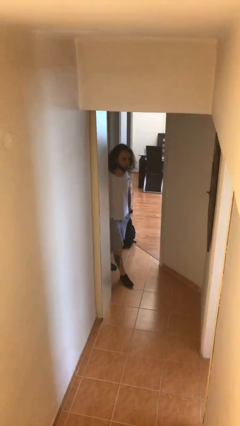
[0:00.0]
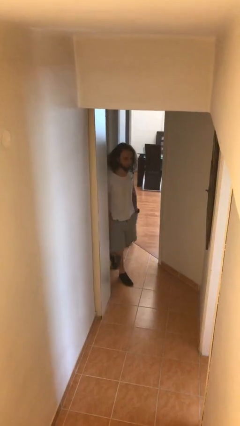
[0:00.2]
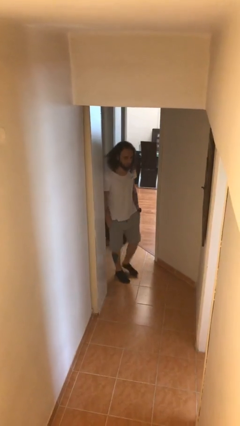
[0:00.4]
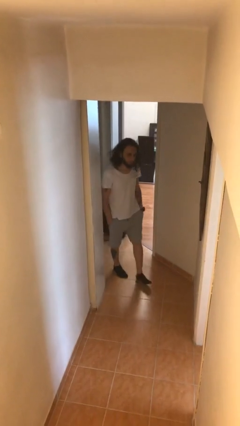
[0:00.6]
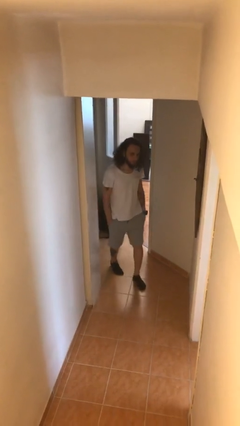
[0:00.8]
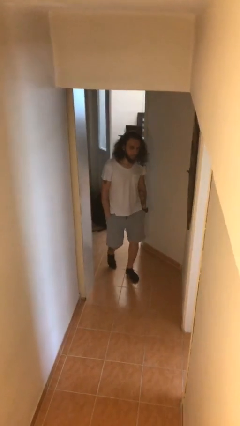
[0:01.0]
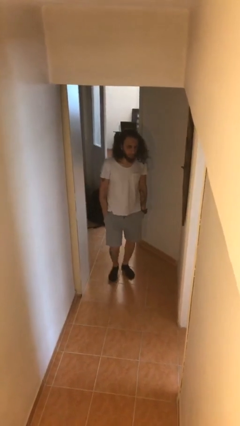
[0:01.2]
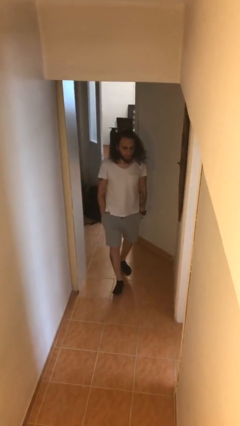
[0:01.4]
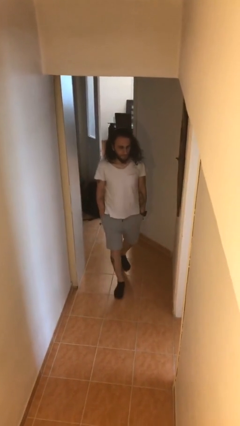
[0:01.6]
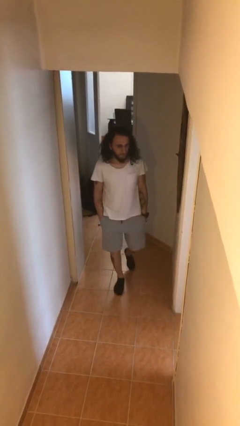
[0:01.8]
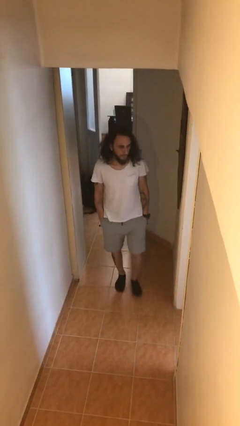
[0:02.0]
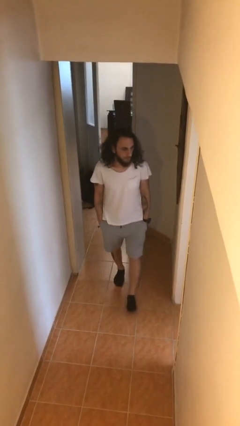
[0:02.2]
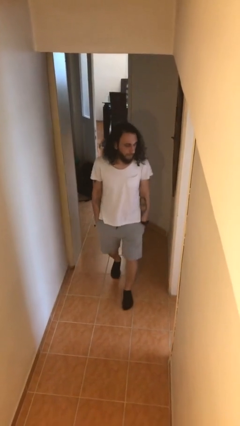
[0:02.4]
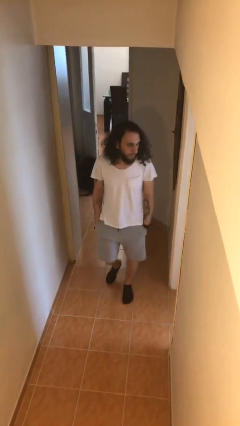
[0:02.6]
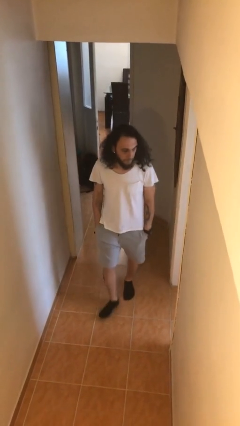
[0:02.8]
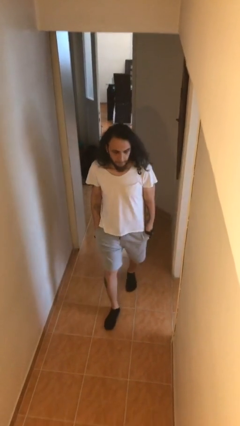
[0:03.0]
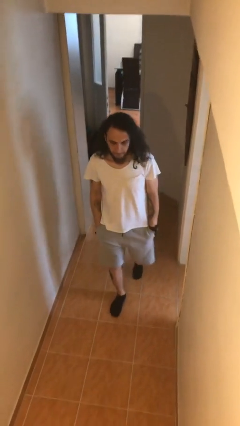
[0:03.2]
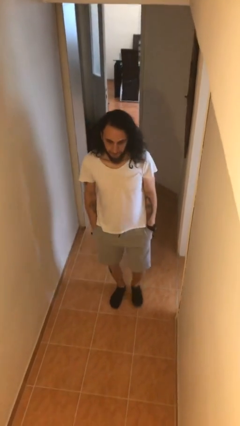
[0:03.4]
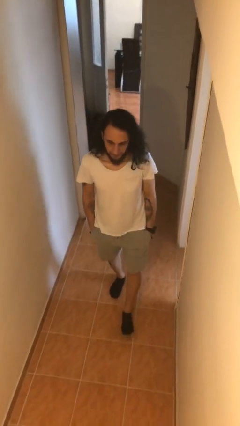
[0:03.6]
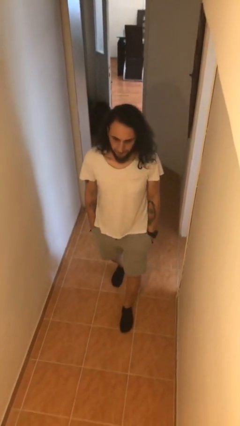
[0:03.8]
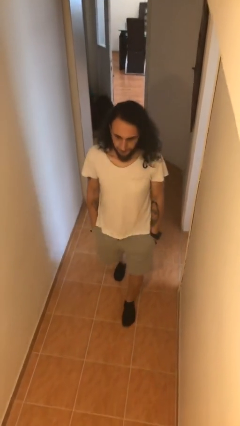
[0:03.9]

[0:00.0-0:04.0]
person enters scene through structure

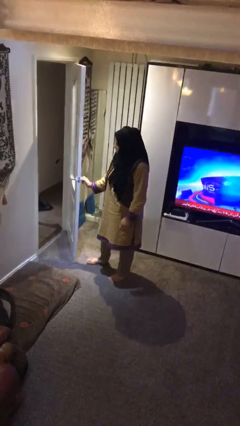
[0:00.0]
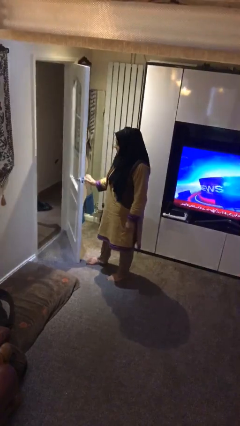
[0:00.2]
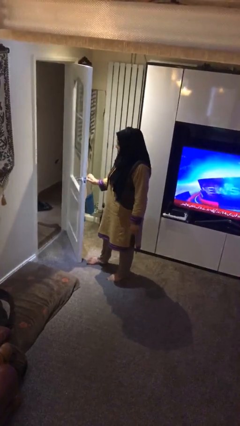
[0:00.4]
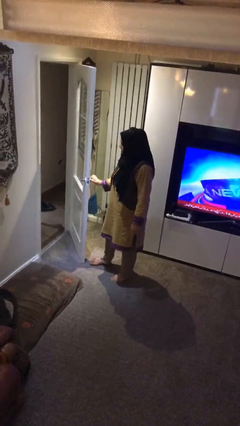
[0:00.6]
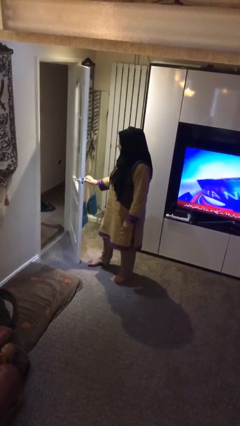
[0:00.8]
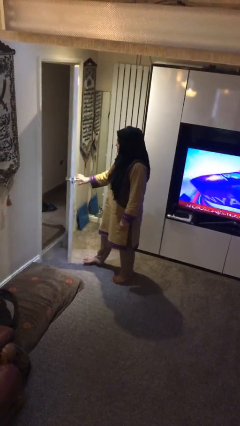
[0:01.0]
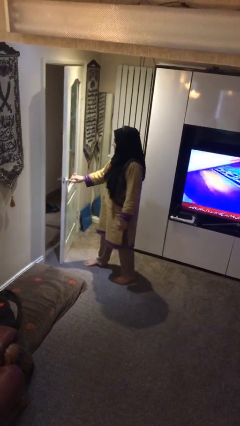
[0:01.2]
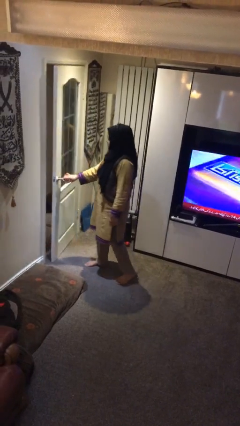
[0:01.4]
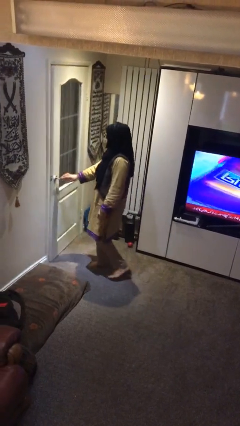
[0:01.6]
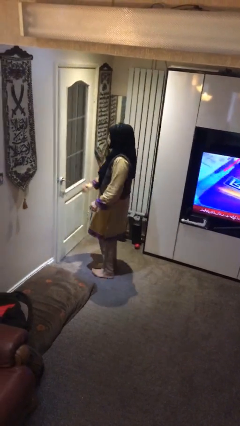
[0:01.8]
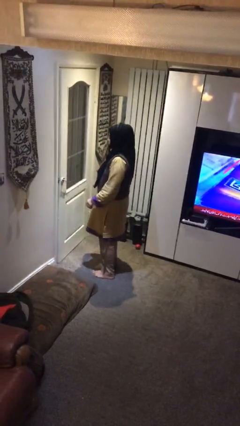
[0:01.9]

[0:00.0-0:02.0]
person closes facility door

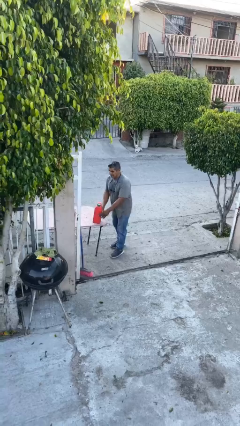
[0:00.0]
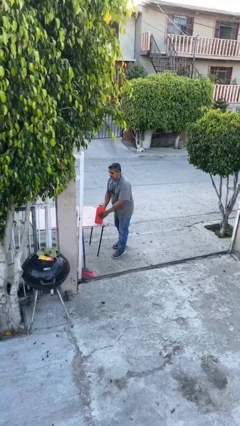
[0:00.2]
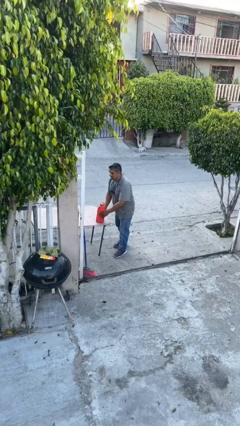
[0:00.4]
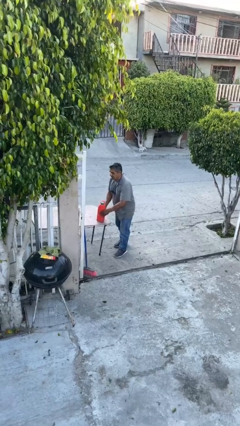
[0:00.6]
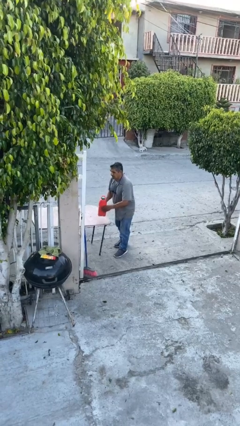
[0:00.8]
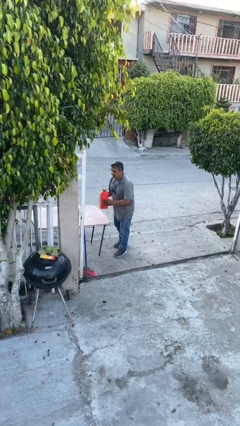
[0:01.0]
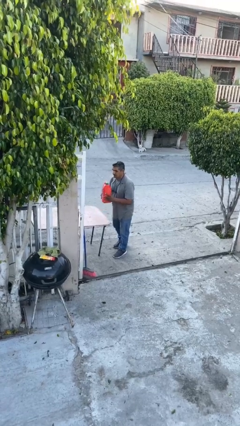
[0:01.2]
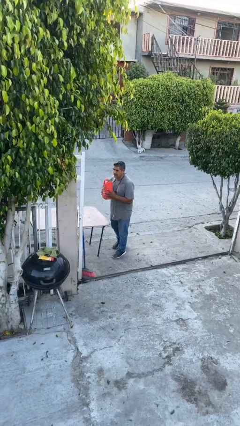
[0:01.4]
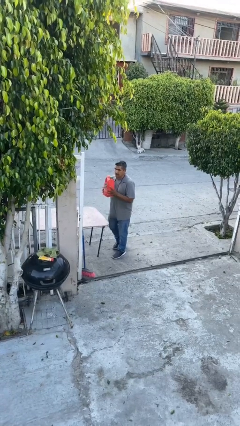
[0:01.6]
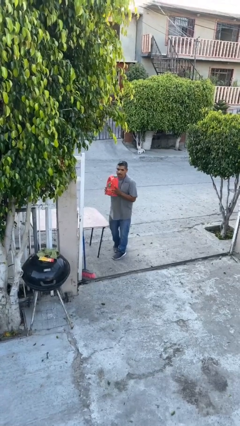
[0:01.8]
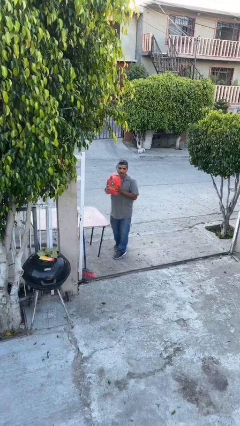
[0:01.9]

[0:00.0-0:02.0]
person picks up object from table

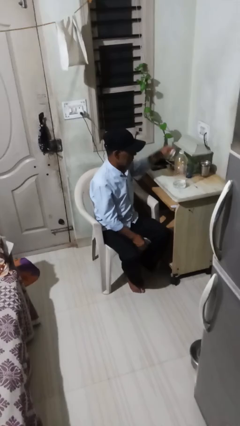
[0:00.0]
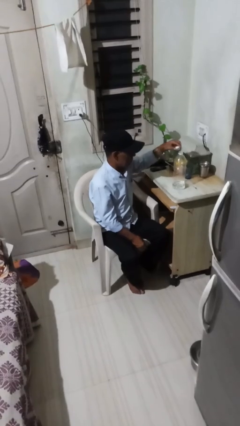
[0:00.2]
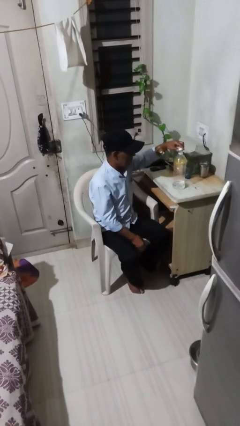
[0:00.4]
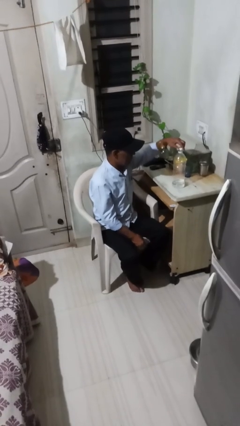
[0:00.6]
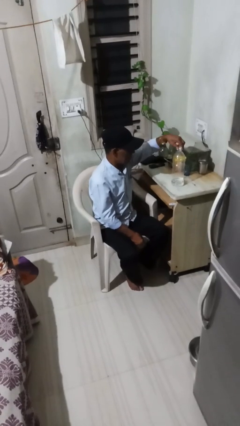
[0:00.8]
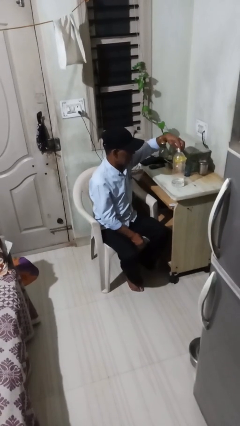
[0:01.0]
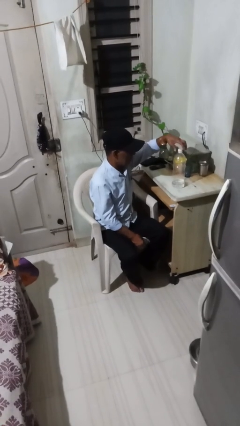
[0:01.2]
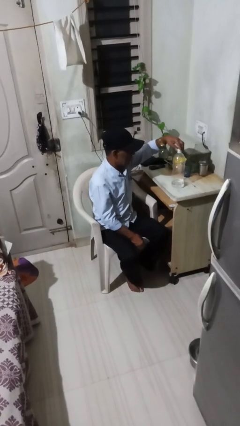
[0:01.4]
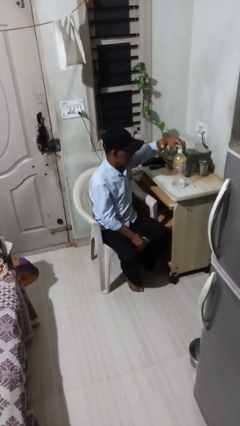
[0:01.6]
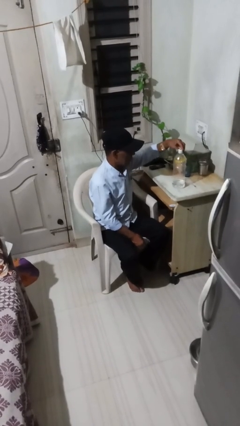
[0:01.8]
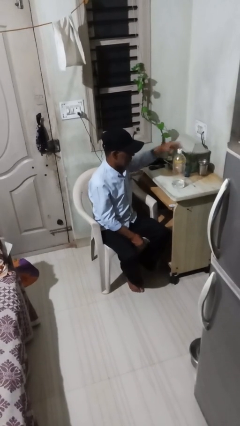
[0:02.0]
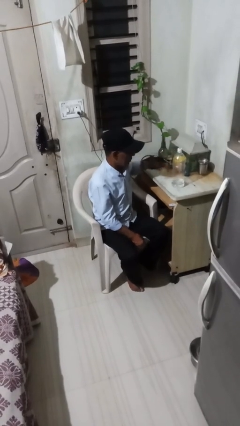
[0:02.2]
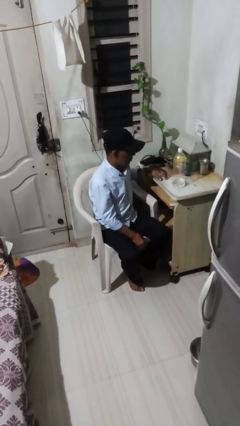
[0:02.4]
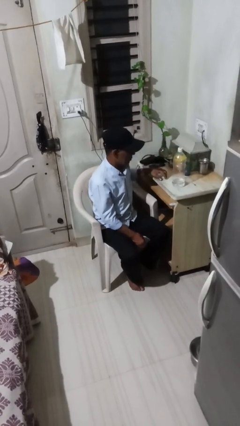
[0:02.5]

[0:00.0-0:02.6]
person screws lid to bottle

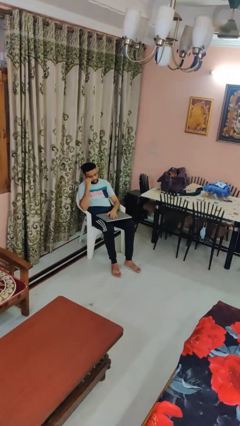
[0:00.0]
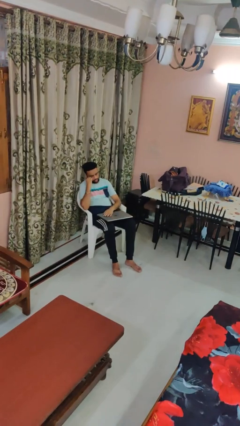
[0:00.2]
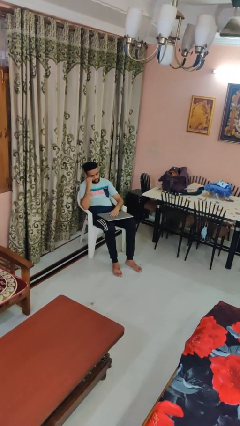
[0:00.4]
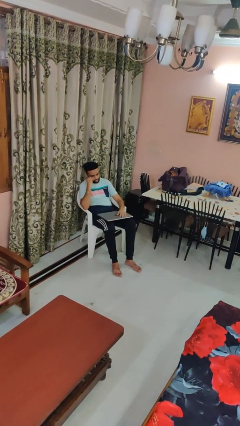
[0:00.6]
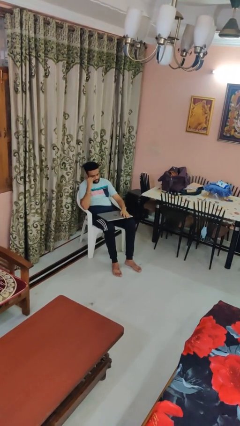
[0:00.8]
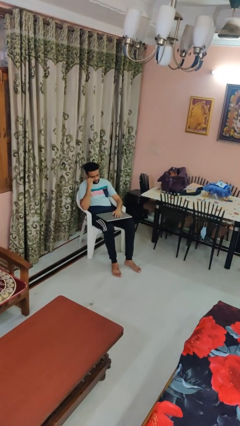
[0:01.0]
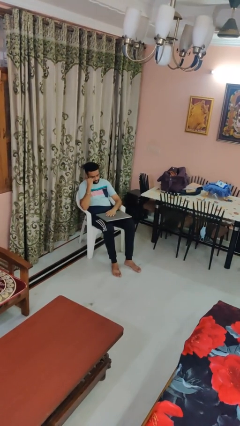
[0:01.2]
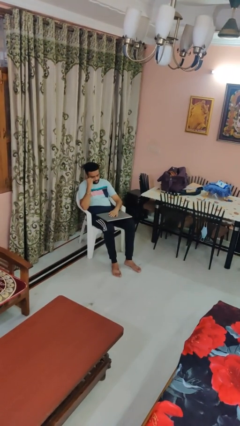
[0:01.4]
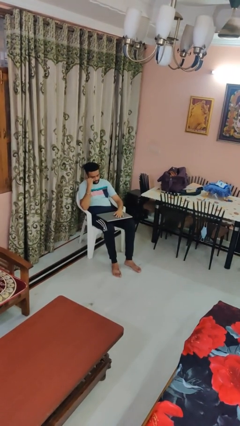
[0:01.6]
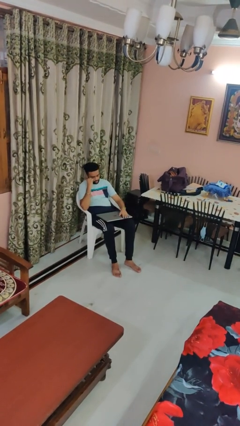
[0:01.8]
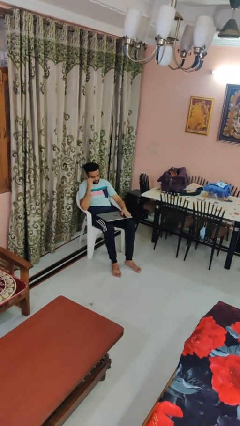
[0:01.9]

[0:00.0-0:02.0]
person waves hand over object

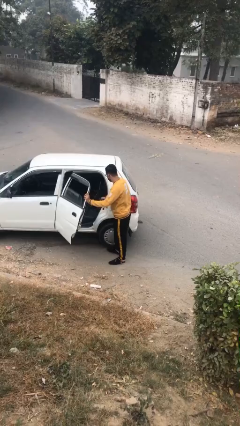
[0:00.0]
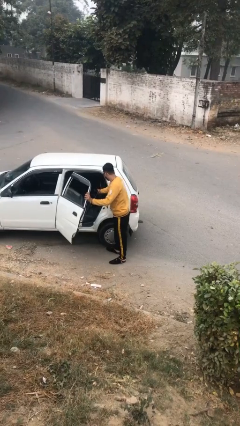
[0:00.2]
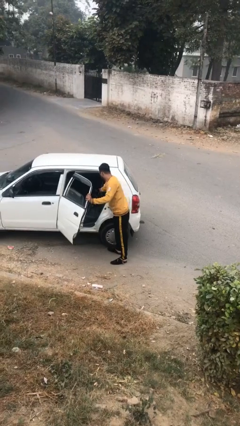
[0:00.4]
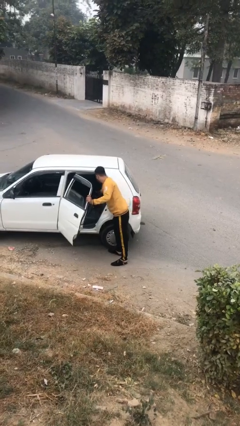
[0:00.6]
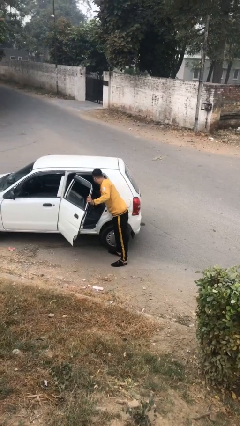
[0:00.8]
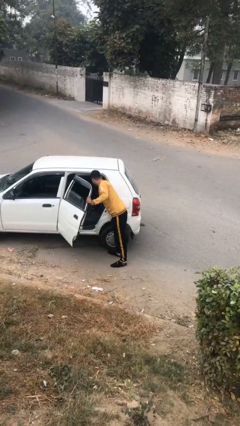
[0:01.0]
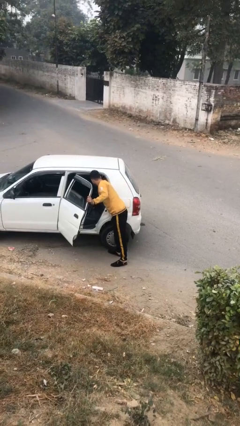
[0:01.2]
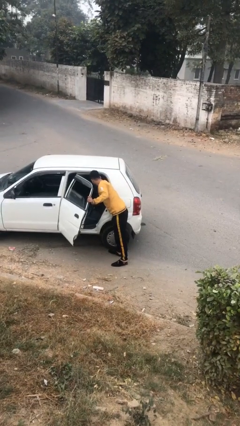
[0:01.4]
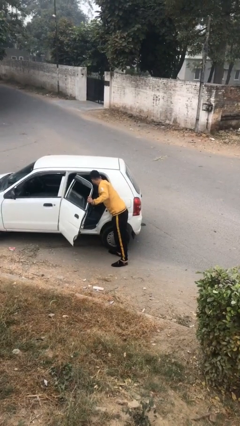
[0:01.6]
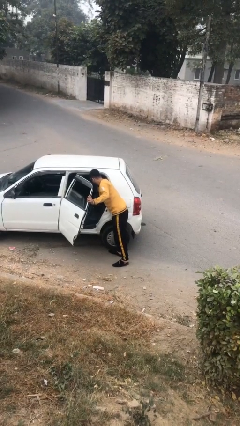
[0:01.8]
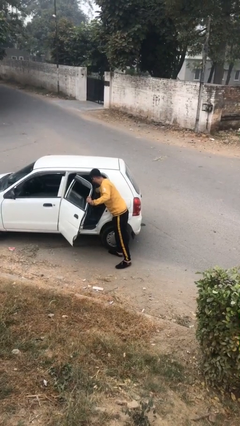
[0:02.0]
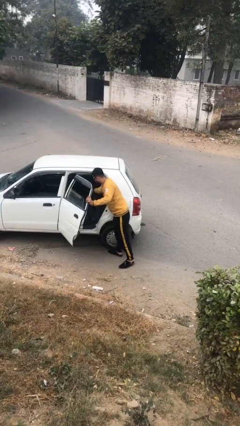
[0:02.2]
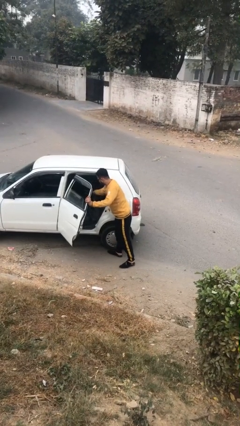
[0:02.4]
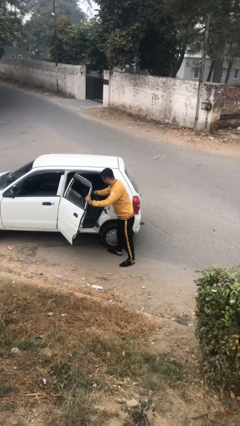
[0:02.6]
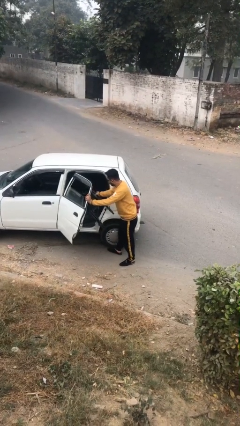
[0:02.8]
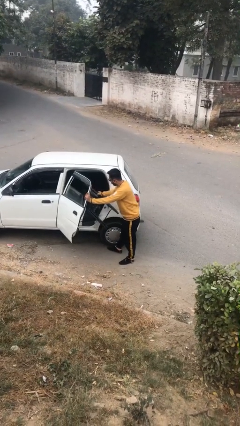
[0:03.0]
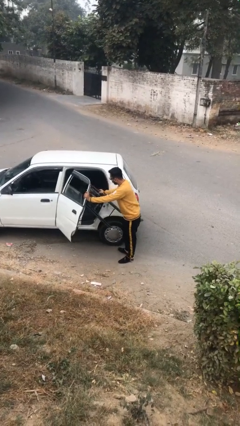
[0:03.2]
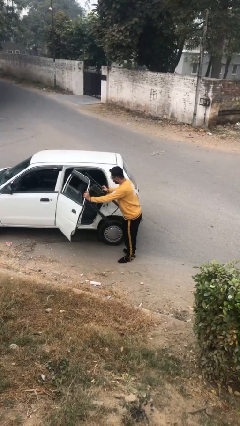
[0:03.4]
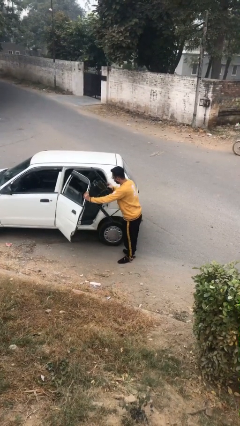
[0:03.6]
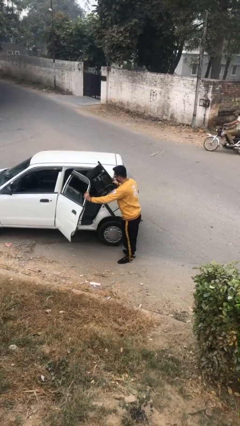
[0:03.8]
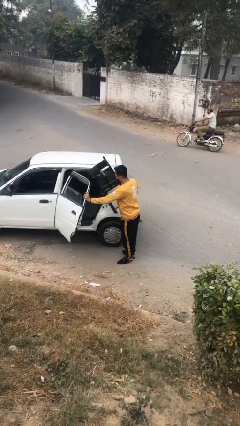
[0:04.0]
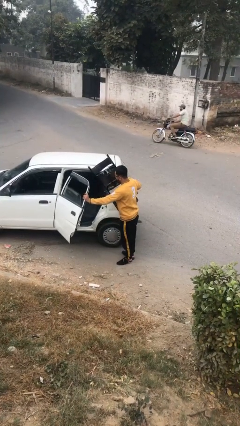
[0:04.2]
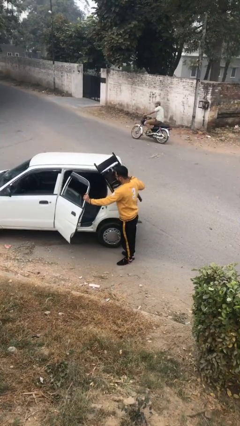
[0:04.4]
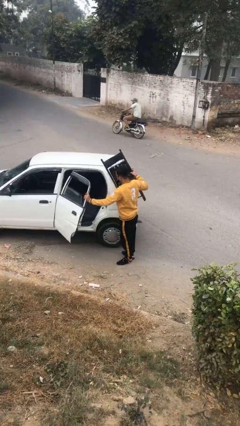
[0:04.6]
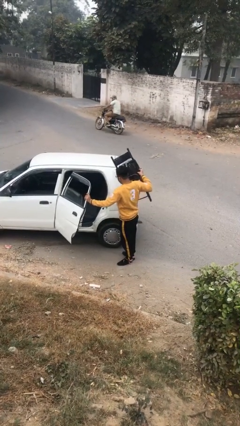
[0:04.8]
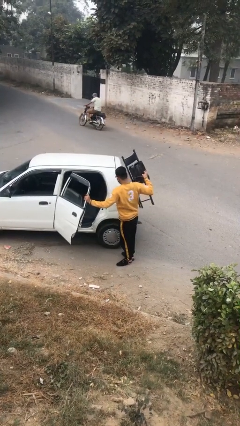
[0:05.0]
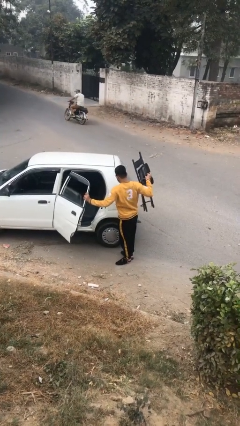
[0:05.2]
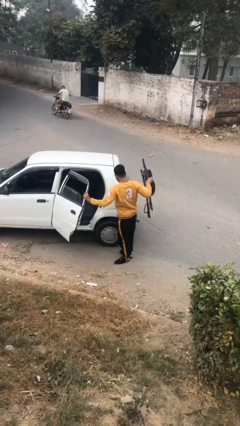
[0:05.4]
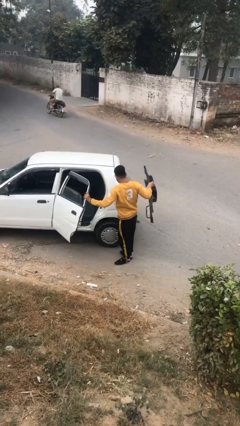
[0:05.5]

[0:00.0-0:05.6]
person unloads car
